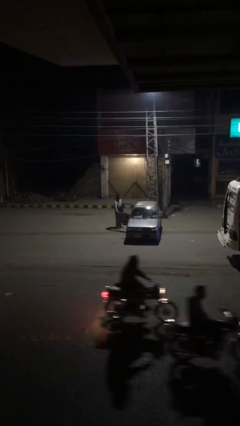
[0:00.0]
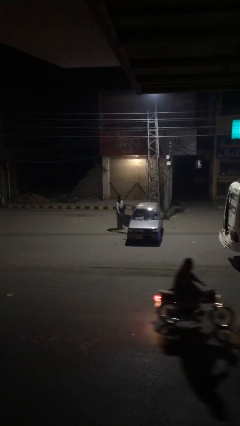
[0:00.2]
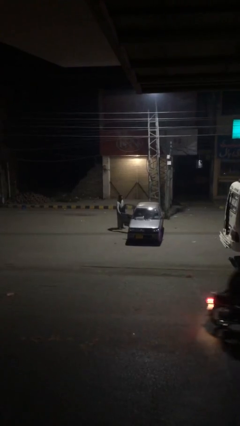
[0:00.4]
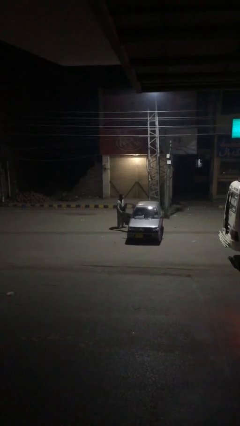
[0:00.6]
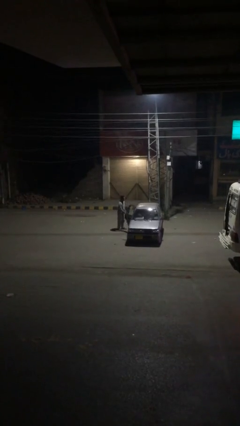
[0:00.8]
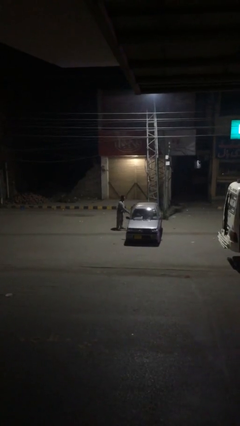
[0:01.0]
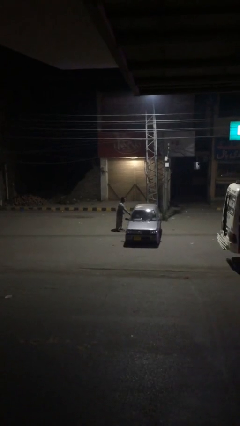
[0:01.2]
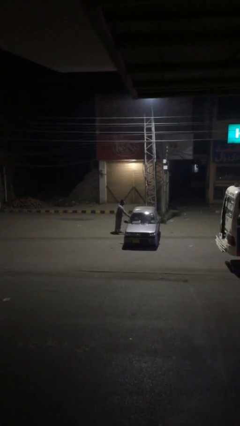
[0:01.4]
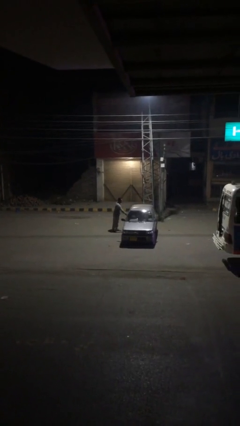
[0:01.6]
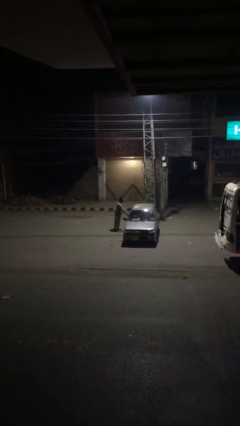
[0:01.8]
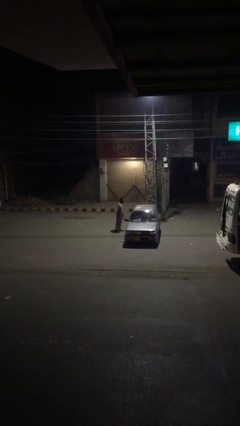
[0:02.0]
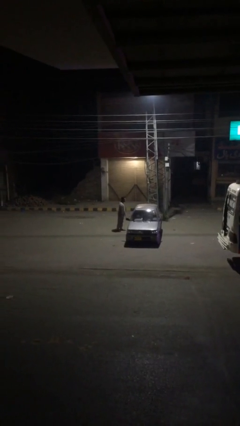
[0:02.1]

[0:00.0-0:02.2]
person closes car door

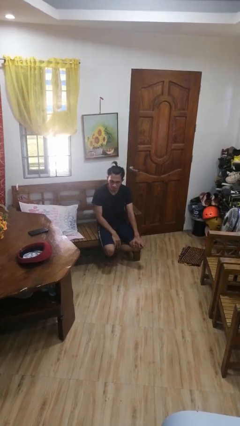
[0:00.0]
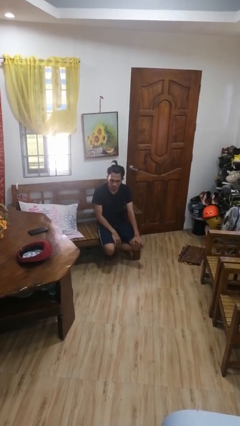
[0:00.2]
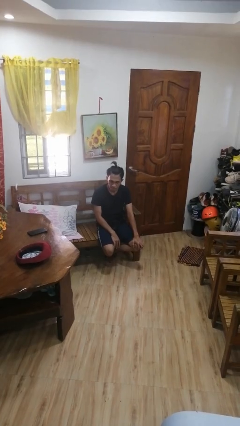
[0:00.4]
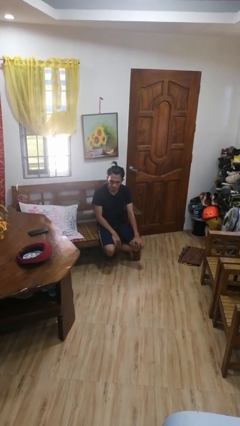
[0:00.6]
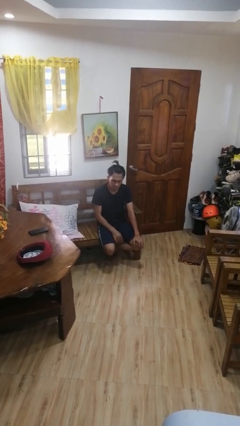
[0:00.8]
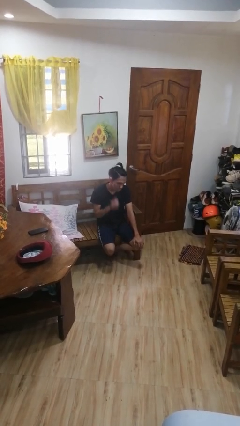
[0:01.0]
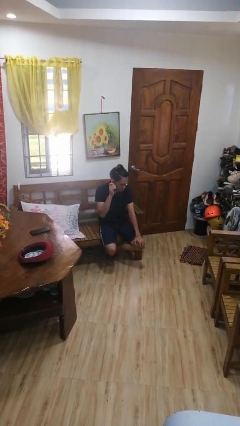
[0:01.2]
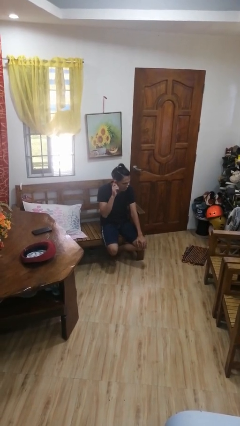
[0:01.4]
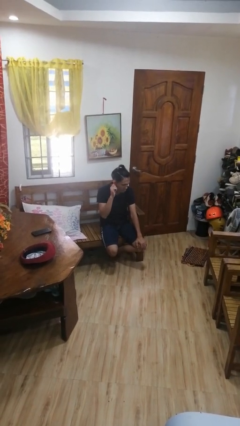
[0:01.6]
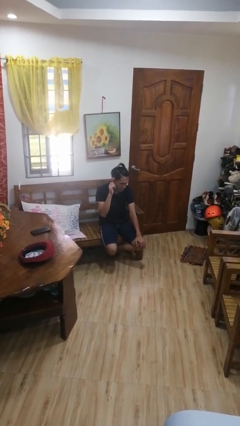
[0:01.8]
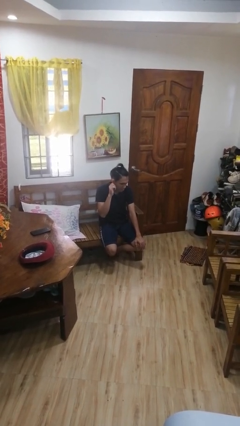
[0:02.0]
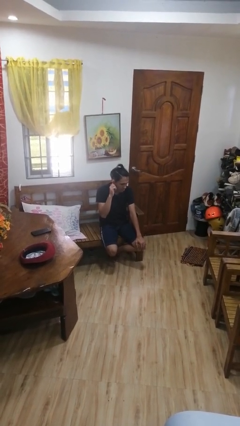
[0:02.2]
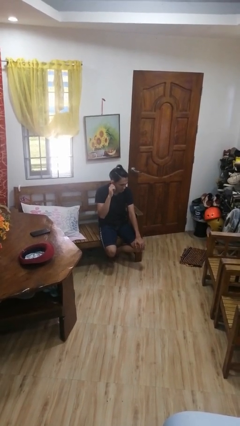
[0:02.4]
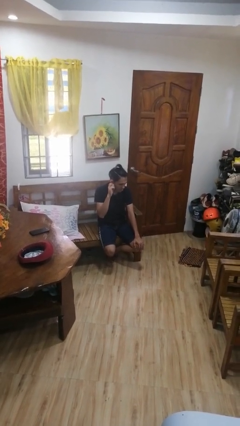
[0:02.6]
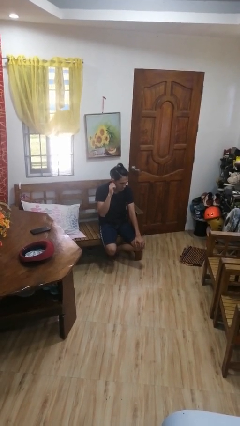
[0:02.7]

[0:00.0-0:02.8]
person touches earlobe

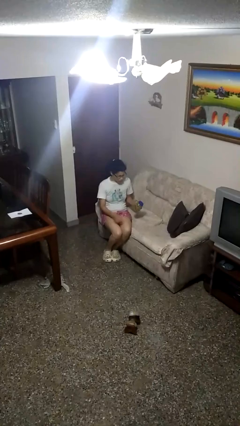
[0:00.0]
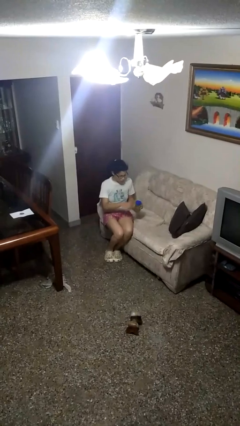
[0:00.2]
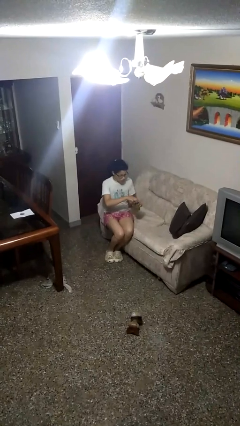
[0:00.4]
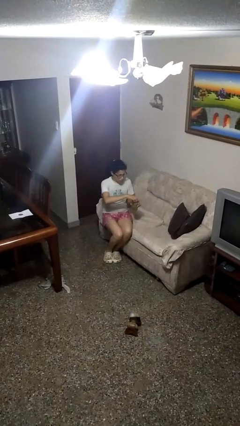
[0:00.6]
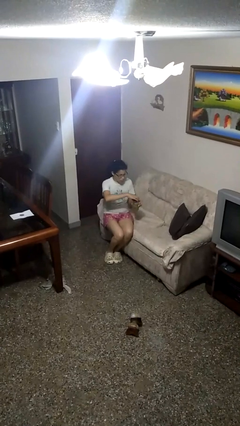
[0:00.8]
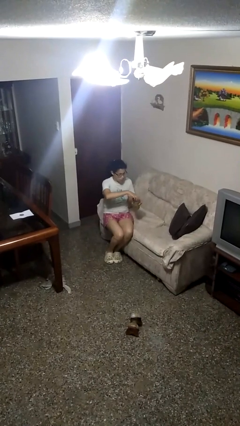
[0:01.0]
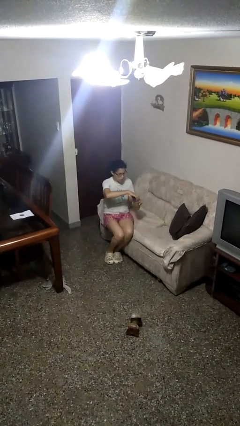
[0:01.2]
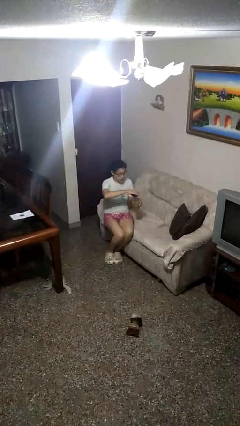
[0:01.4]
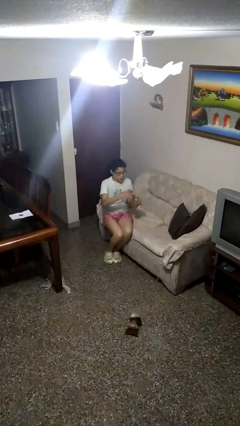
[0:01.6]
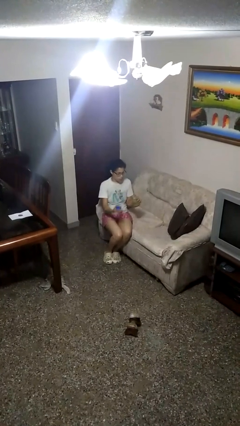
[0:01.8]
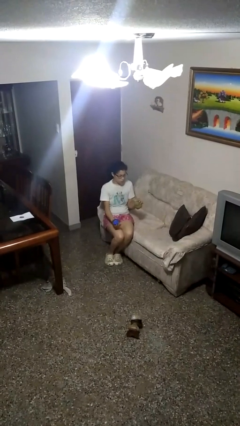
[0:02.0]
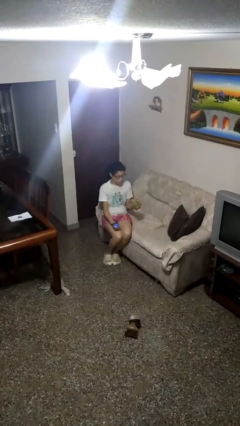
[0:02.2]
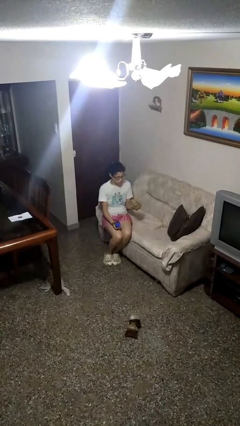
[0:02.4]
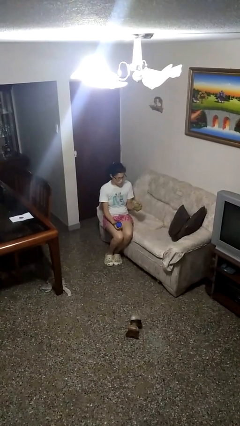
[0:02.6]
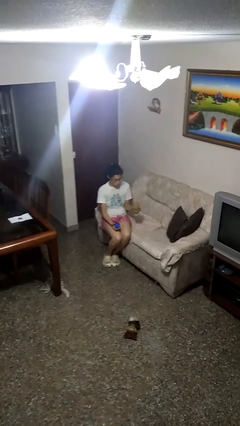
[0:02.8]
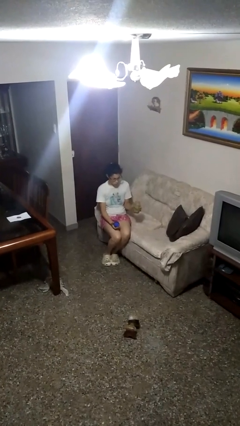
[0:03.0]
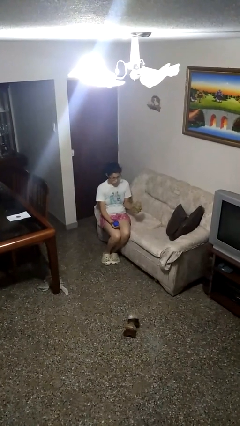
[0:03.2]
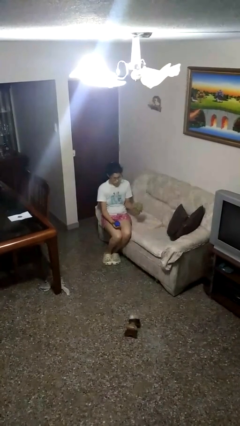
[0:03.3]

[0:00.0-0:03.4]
person opens jar

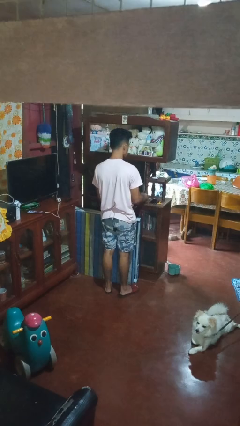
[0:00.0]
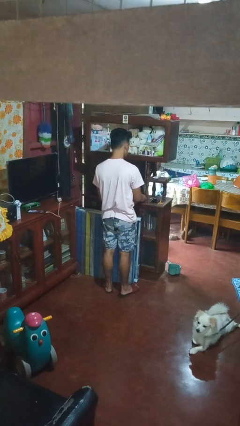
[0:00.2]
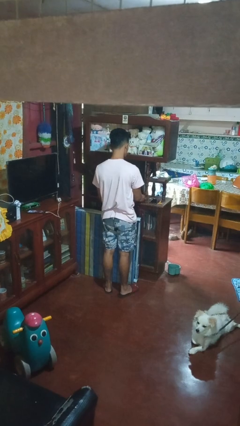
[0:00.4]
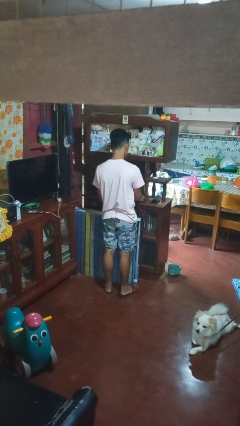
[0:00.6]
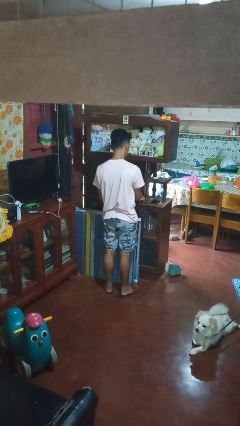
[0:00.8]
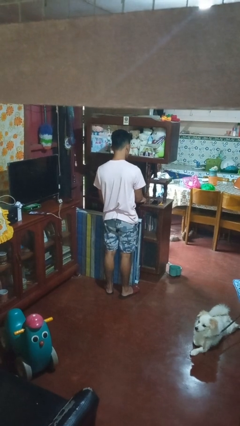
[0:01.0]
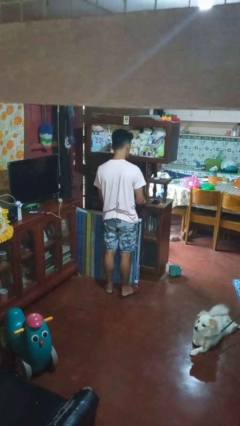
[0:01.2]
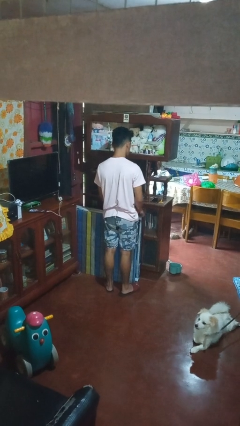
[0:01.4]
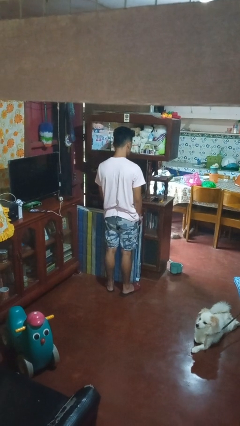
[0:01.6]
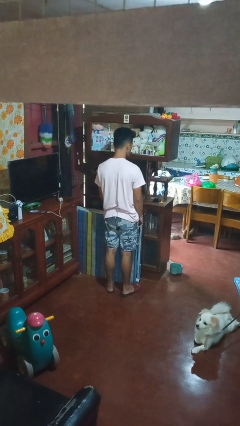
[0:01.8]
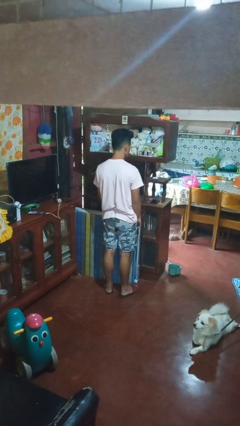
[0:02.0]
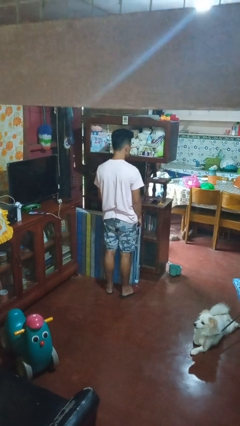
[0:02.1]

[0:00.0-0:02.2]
person puts down object on shelf

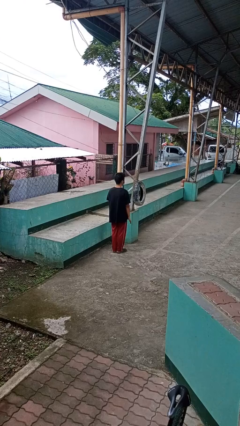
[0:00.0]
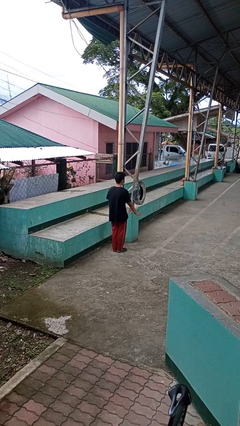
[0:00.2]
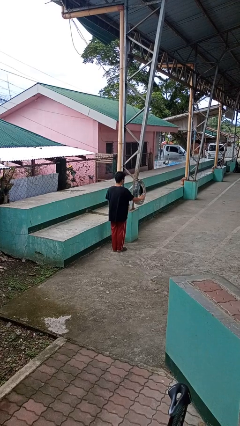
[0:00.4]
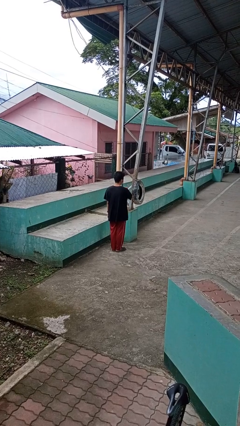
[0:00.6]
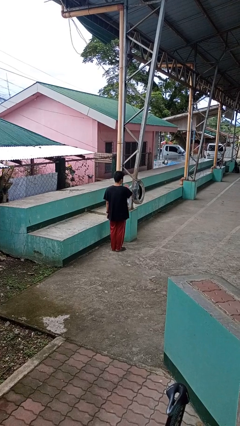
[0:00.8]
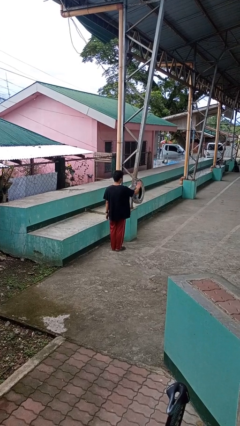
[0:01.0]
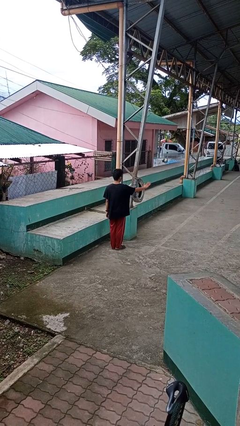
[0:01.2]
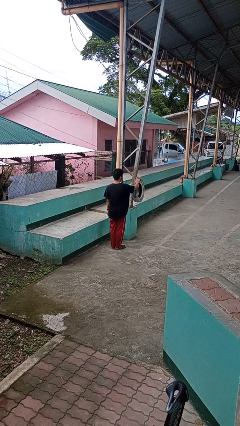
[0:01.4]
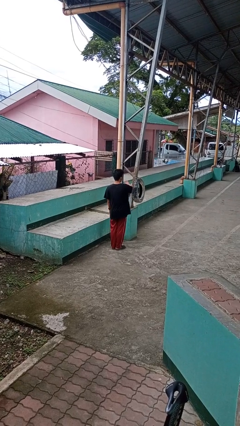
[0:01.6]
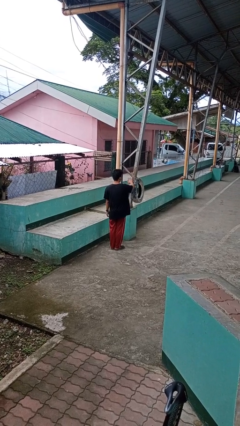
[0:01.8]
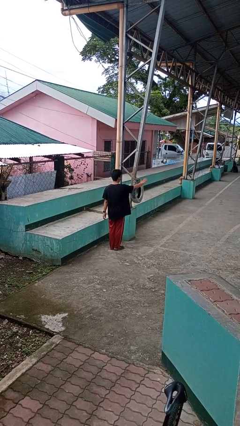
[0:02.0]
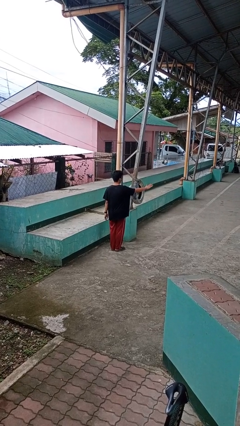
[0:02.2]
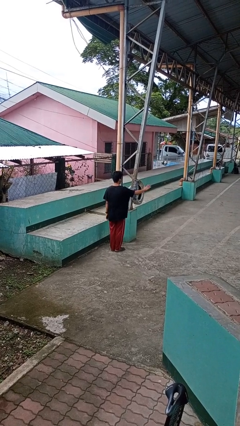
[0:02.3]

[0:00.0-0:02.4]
person waves hand over object

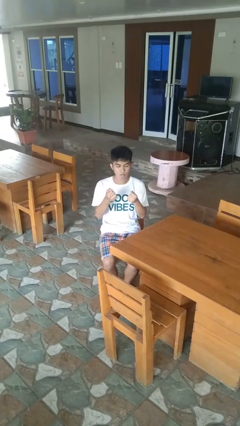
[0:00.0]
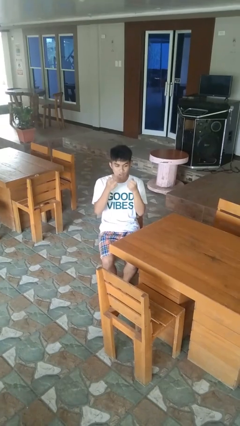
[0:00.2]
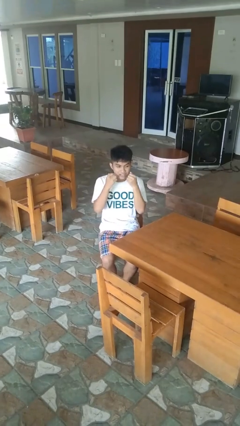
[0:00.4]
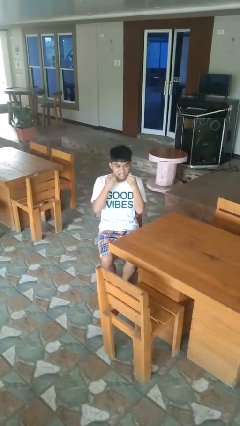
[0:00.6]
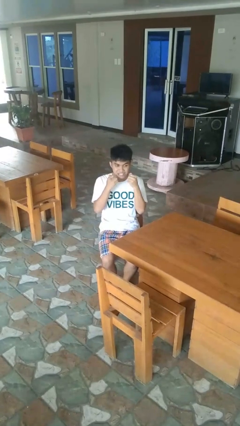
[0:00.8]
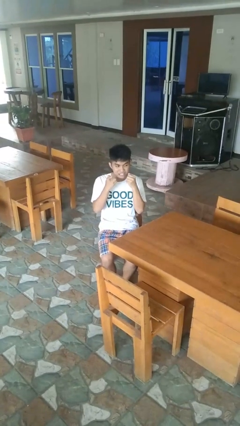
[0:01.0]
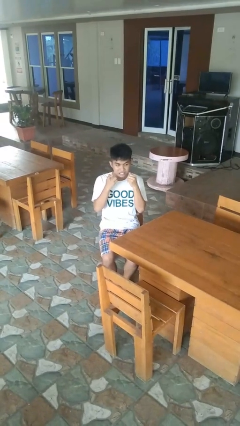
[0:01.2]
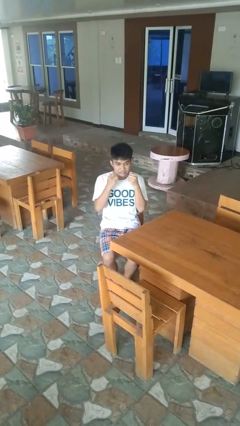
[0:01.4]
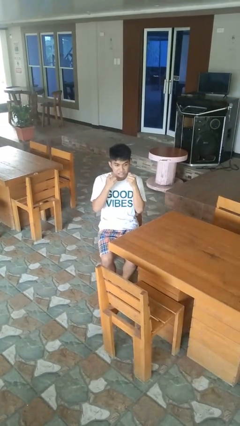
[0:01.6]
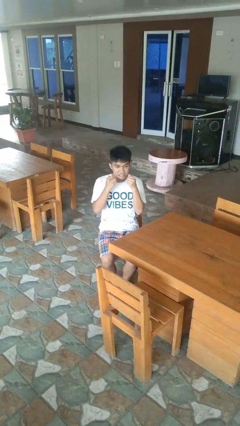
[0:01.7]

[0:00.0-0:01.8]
person flosses

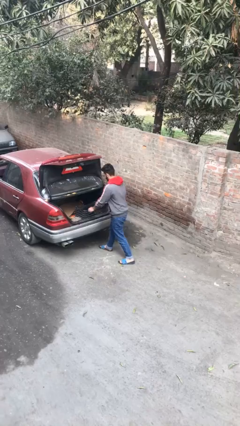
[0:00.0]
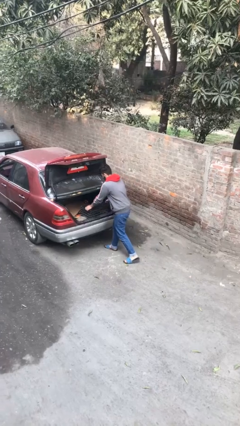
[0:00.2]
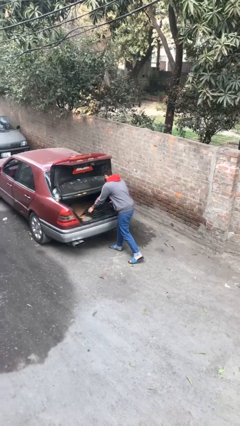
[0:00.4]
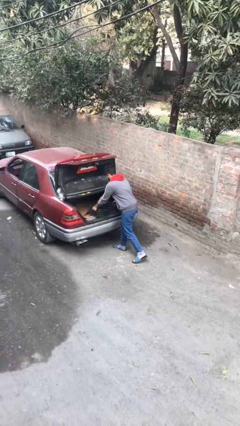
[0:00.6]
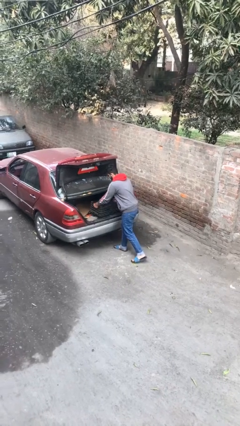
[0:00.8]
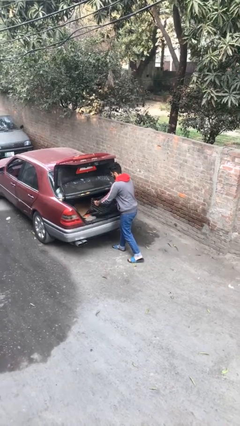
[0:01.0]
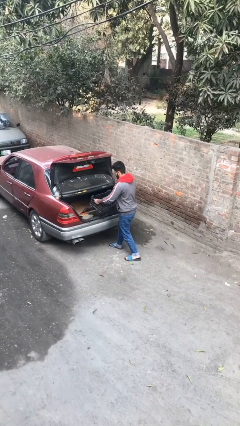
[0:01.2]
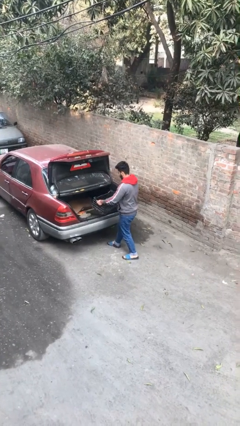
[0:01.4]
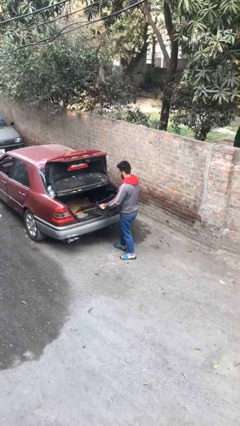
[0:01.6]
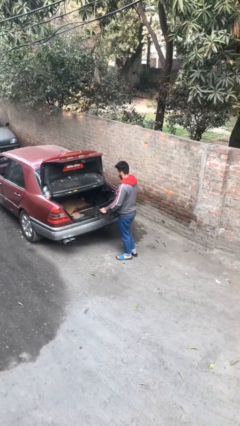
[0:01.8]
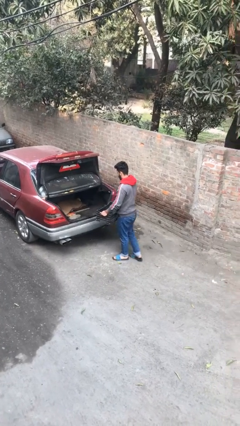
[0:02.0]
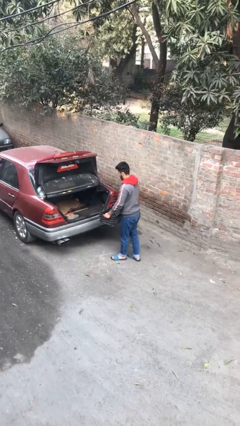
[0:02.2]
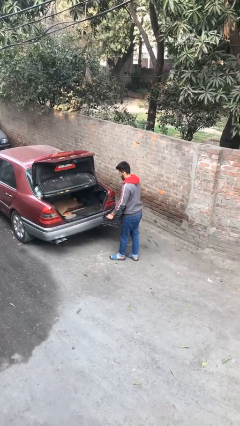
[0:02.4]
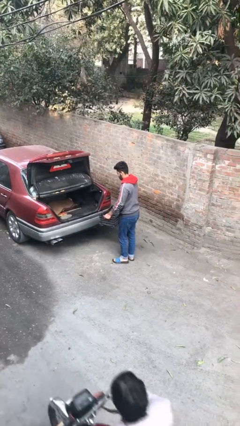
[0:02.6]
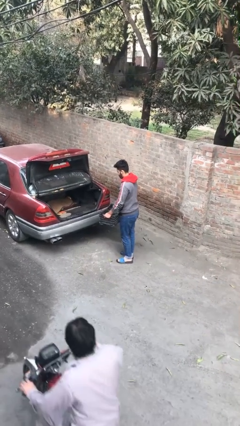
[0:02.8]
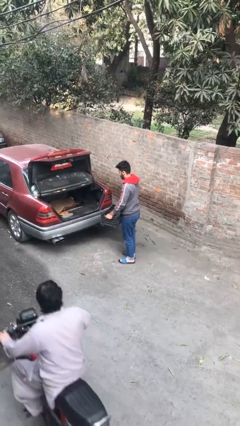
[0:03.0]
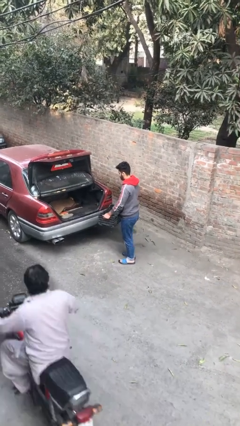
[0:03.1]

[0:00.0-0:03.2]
person unloads car
